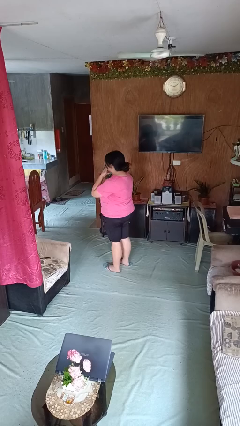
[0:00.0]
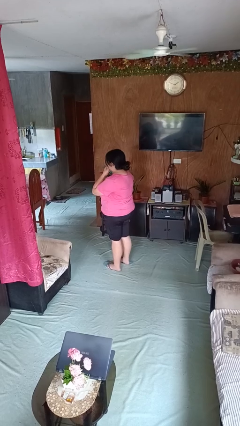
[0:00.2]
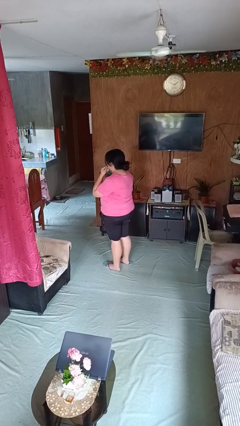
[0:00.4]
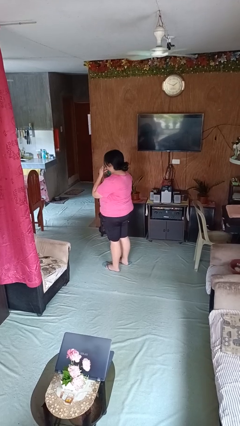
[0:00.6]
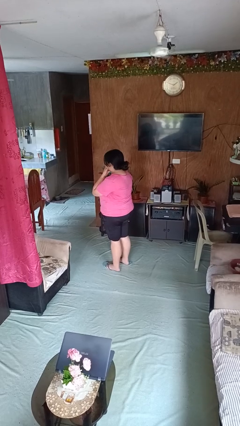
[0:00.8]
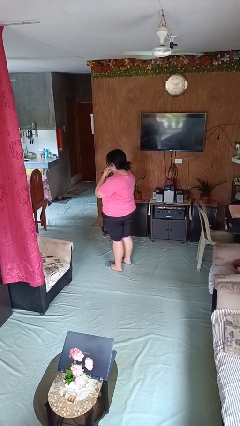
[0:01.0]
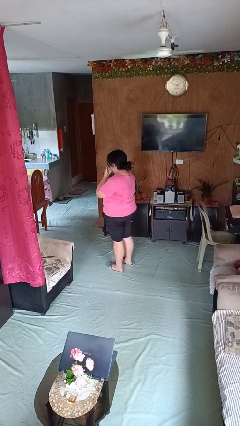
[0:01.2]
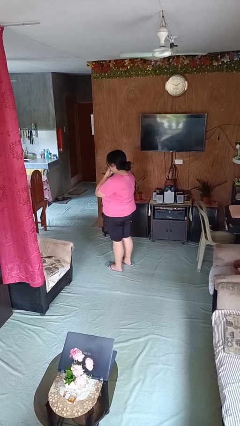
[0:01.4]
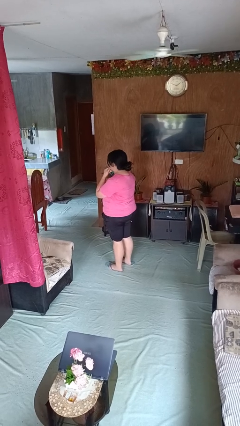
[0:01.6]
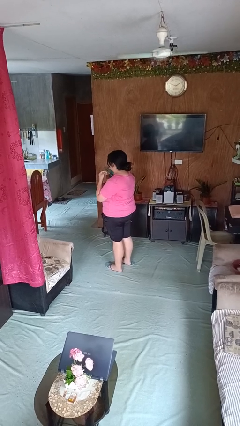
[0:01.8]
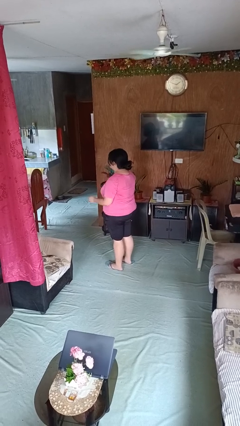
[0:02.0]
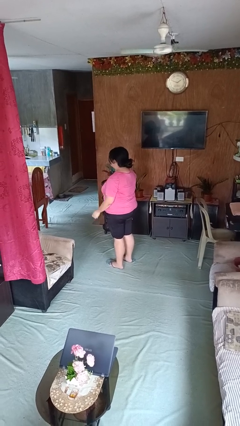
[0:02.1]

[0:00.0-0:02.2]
person strokes chin

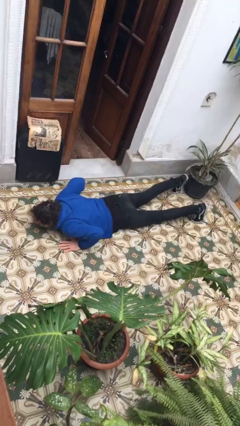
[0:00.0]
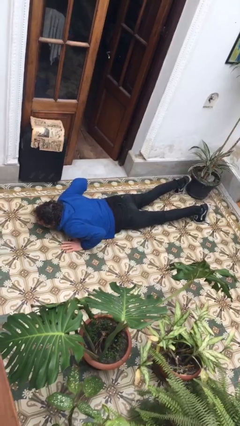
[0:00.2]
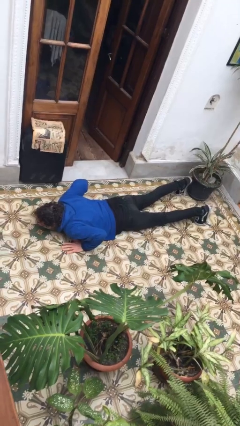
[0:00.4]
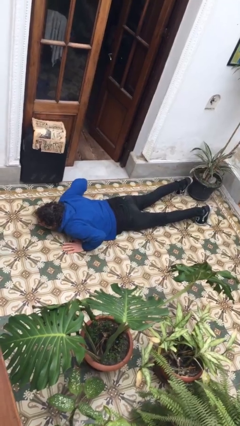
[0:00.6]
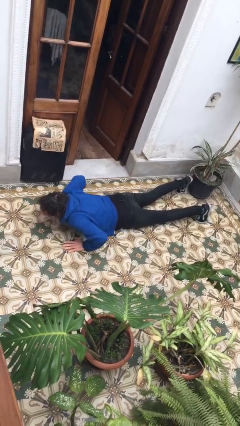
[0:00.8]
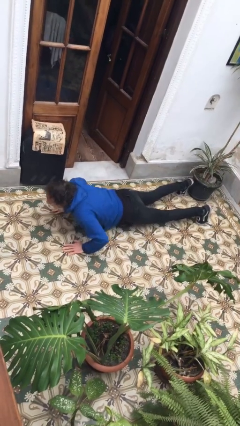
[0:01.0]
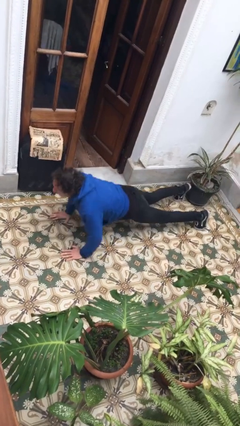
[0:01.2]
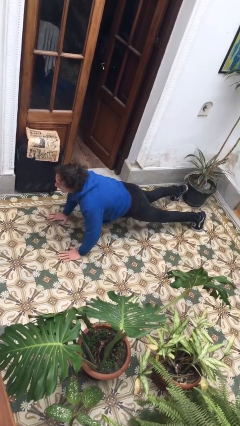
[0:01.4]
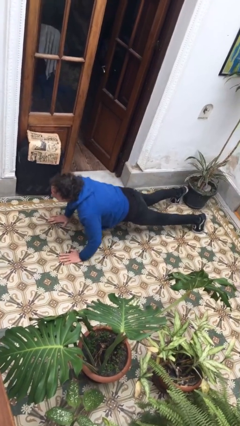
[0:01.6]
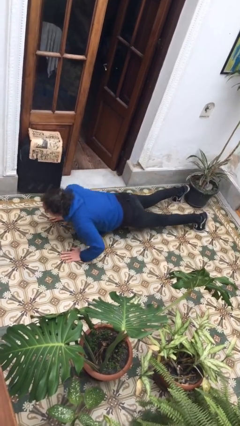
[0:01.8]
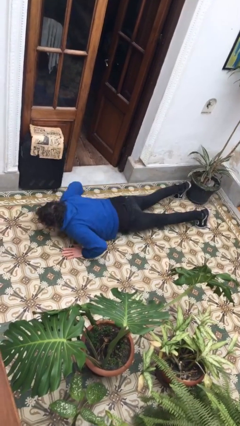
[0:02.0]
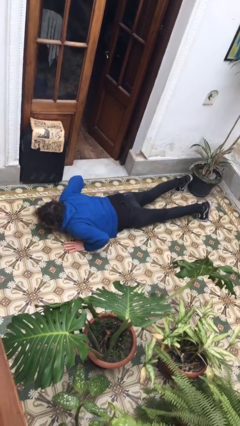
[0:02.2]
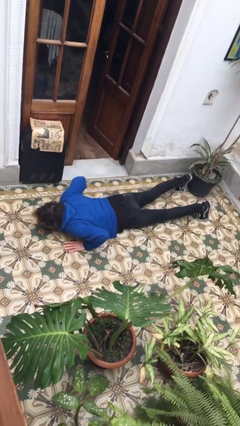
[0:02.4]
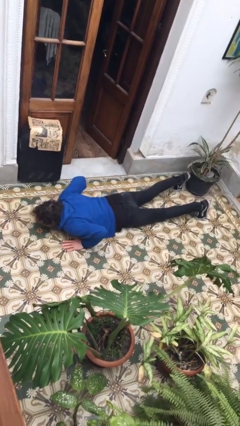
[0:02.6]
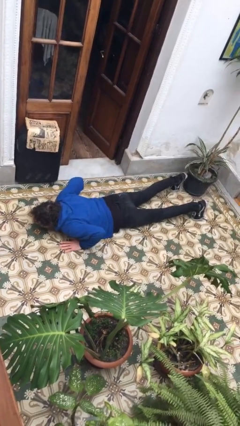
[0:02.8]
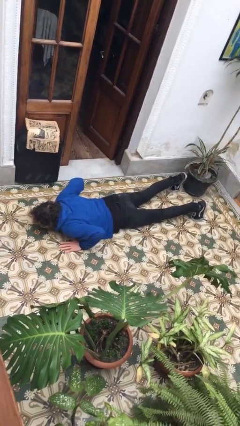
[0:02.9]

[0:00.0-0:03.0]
person exercises with pushup

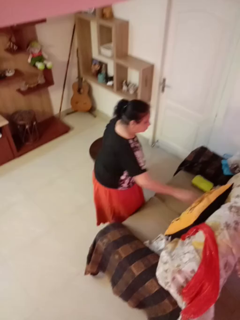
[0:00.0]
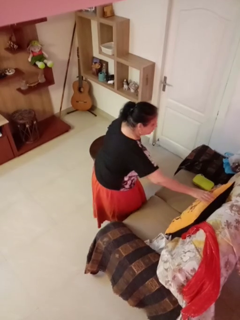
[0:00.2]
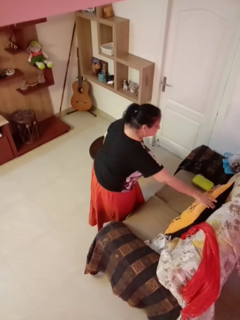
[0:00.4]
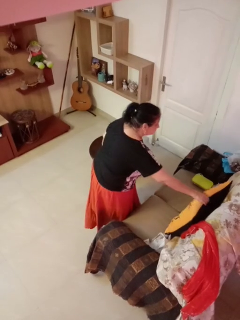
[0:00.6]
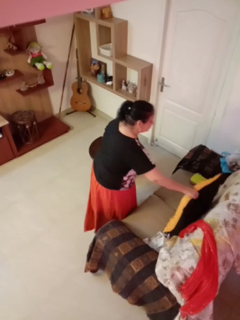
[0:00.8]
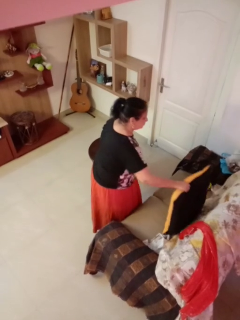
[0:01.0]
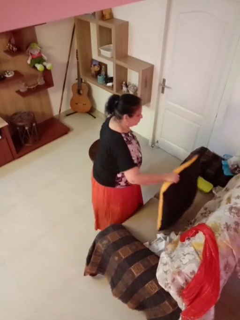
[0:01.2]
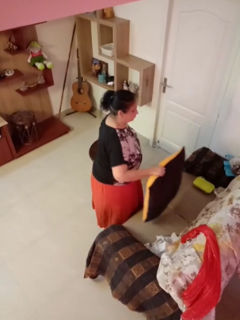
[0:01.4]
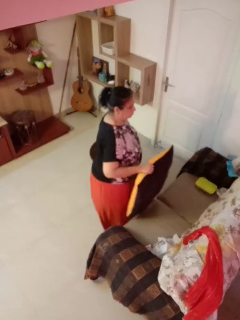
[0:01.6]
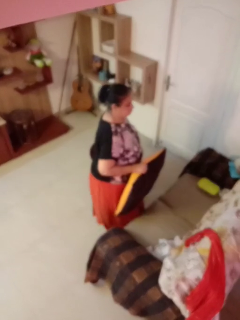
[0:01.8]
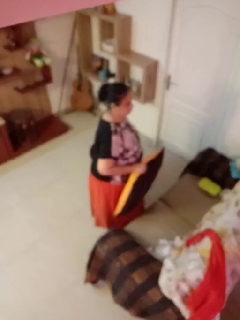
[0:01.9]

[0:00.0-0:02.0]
person picks up object from couch

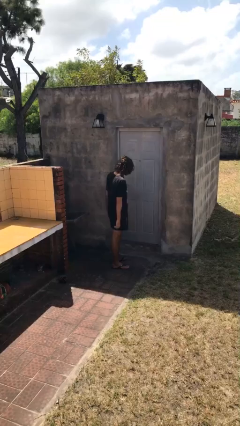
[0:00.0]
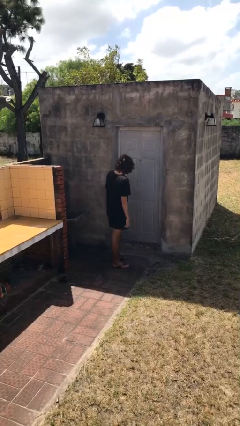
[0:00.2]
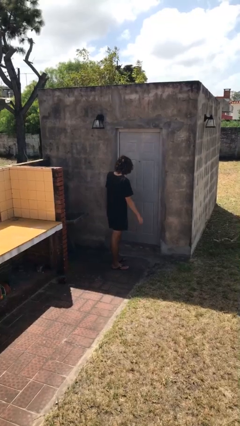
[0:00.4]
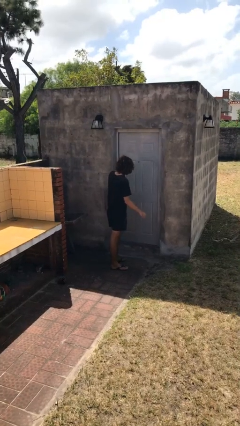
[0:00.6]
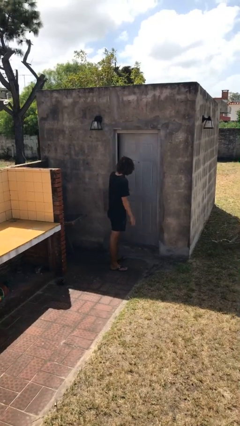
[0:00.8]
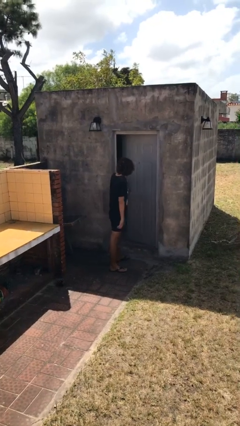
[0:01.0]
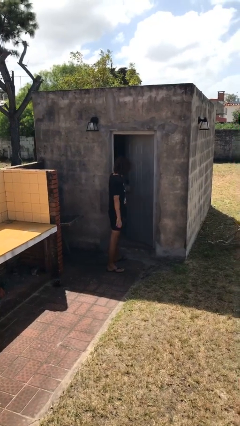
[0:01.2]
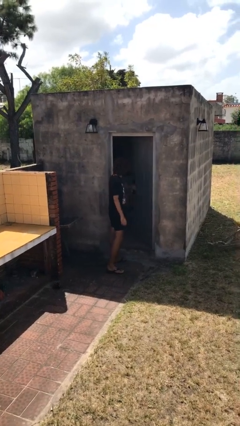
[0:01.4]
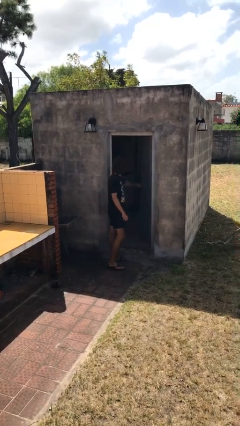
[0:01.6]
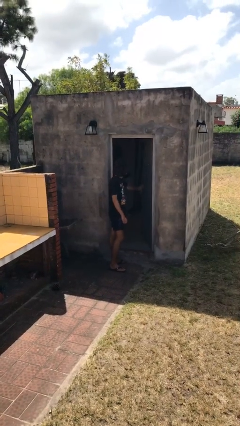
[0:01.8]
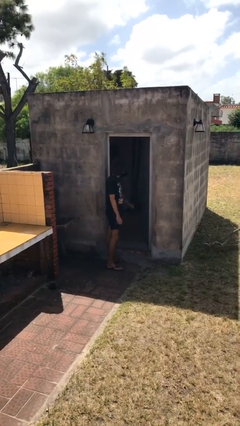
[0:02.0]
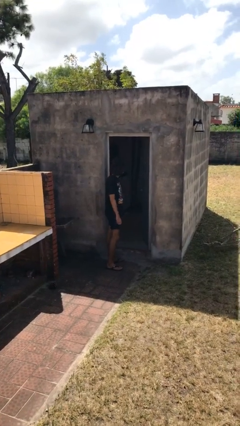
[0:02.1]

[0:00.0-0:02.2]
person opens facility door

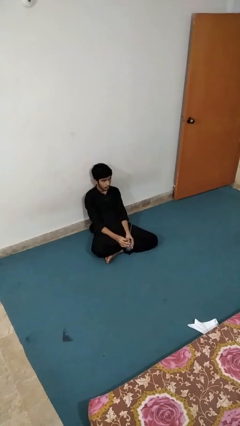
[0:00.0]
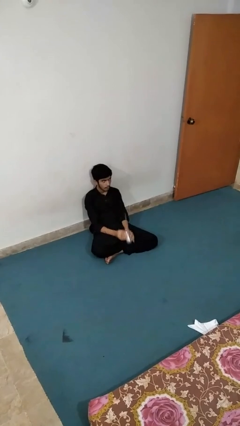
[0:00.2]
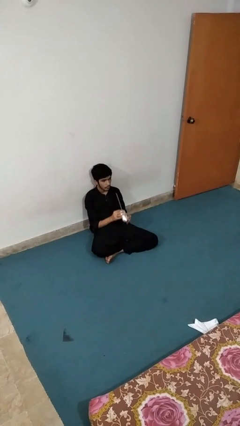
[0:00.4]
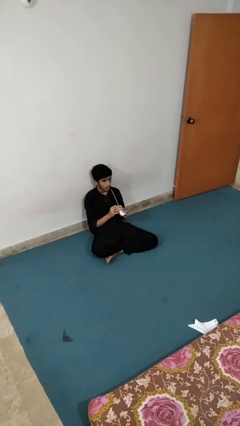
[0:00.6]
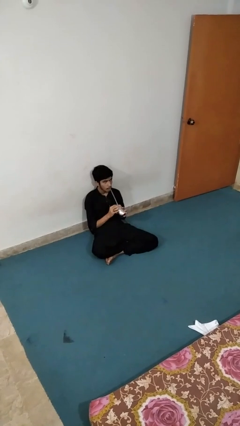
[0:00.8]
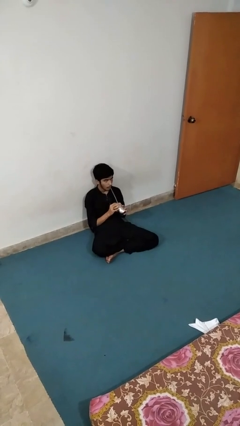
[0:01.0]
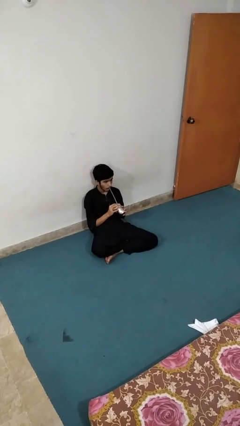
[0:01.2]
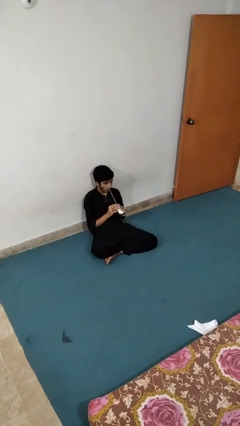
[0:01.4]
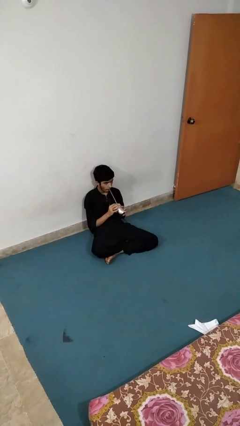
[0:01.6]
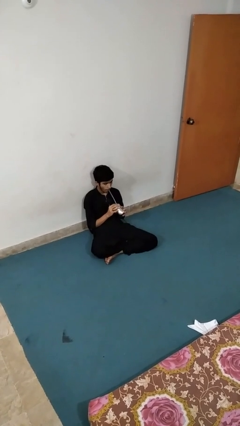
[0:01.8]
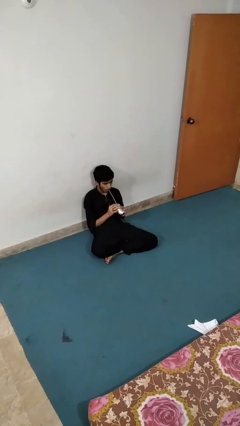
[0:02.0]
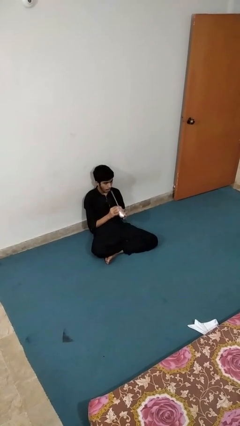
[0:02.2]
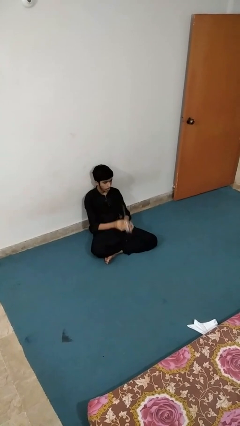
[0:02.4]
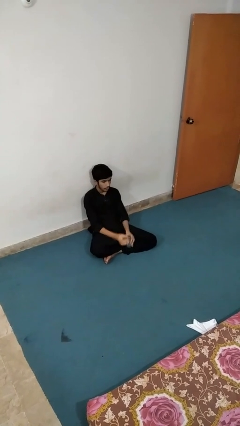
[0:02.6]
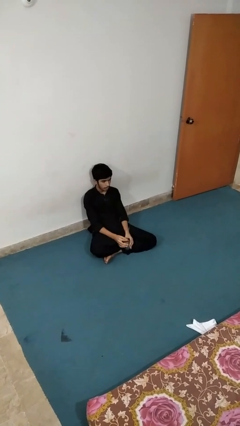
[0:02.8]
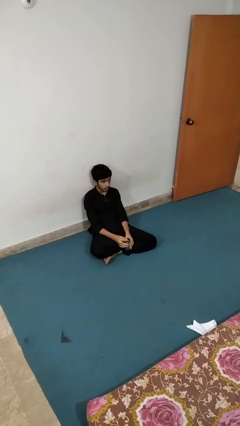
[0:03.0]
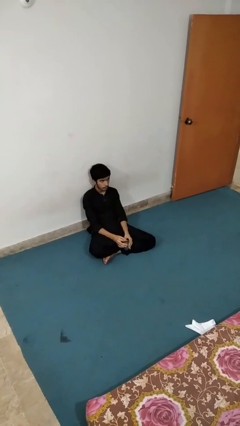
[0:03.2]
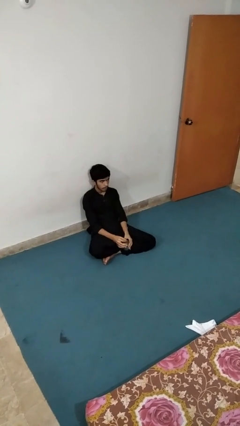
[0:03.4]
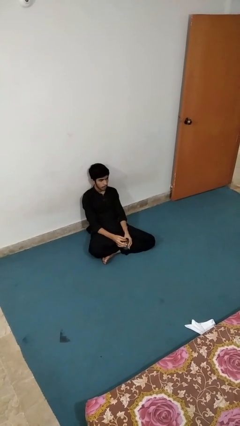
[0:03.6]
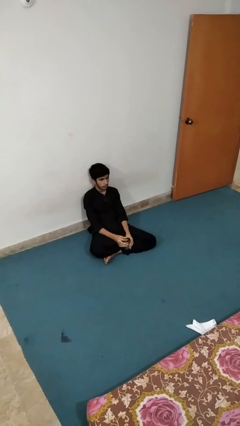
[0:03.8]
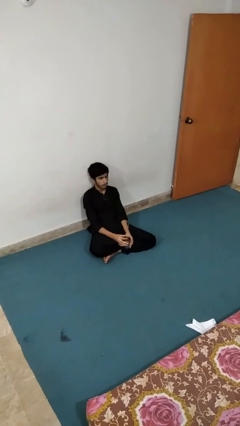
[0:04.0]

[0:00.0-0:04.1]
person drinks from straw

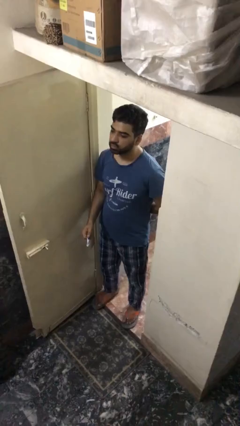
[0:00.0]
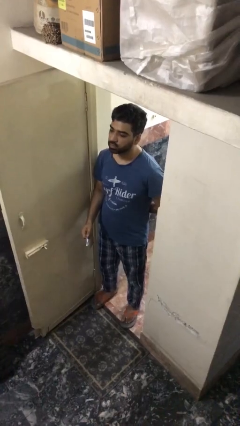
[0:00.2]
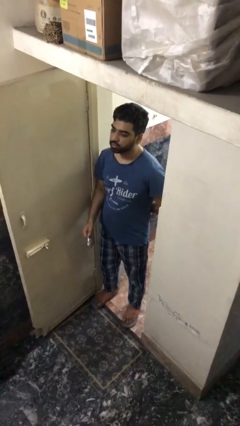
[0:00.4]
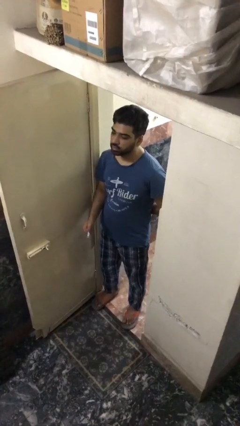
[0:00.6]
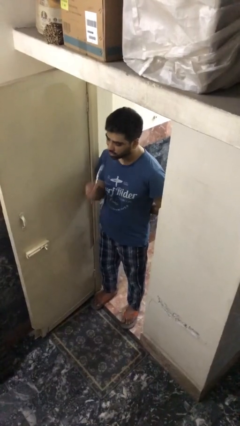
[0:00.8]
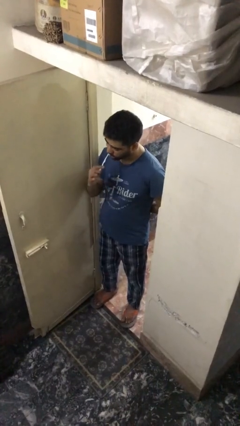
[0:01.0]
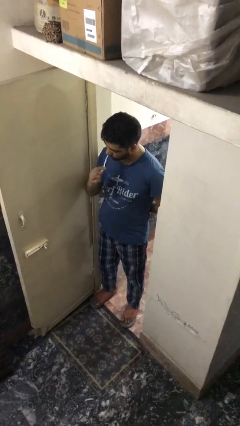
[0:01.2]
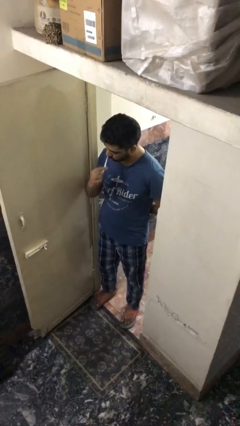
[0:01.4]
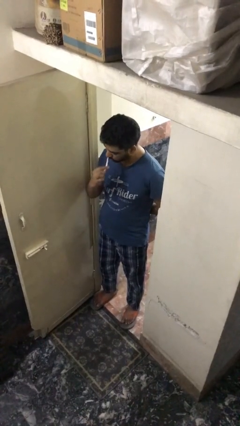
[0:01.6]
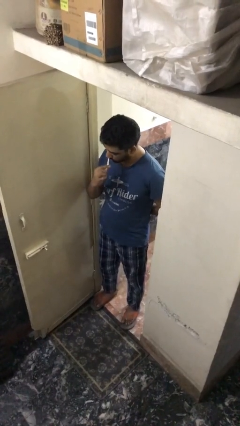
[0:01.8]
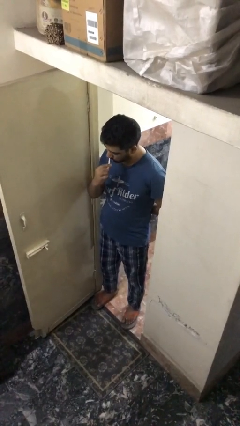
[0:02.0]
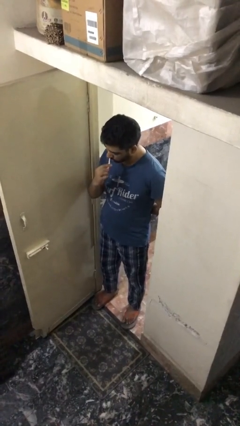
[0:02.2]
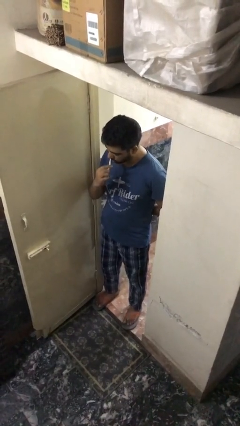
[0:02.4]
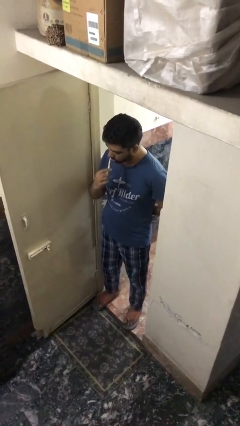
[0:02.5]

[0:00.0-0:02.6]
person brushes teeth

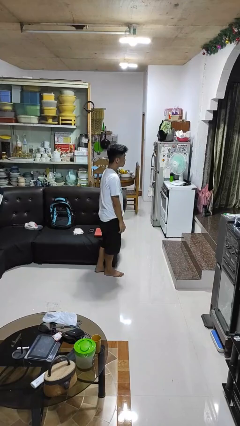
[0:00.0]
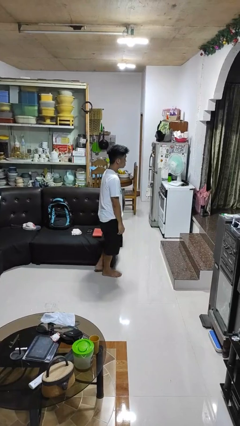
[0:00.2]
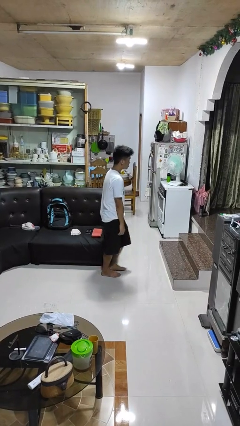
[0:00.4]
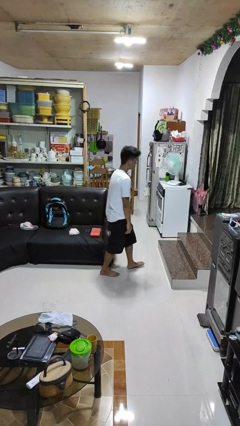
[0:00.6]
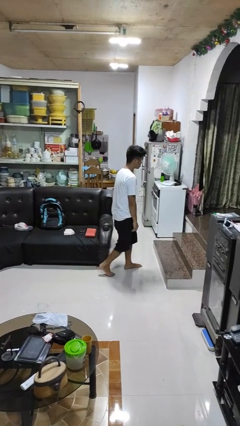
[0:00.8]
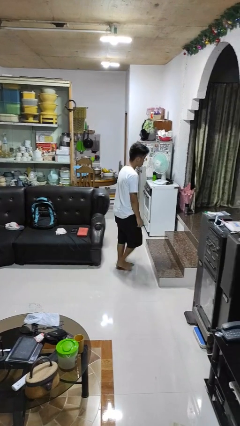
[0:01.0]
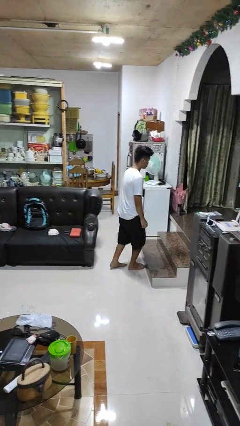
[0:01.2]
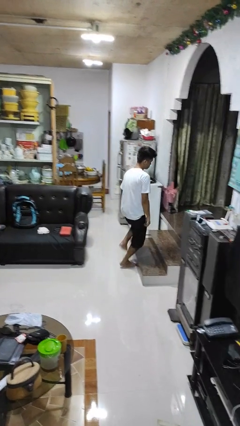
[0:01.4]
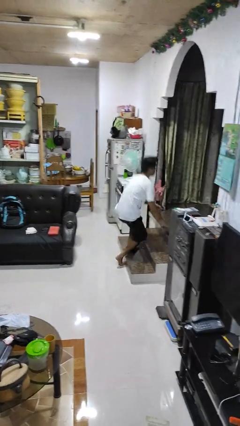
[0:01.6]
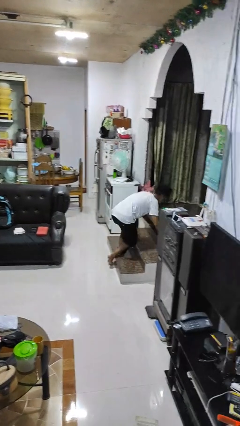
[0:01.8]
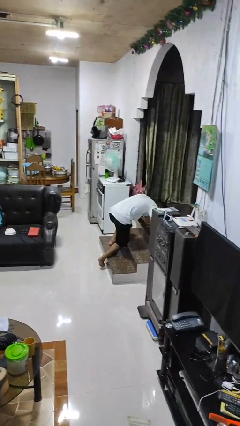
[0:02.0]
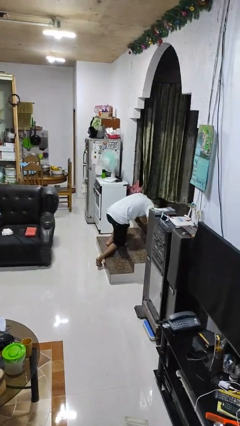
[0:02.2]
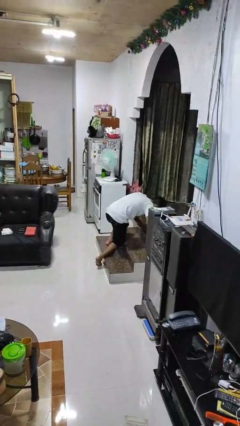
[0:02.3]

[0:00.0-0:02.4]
person trips on object on floor
